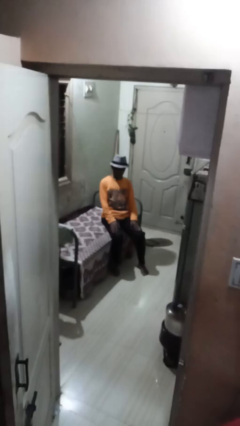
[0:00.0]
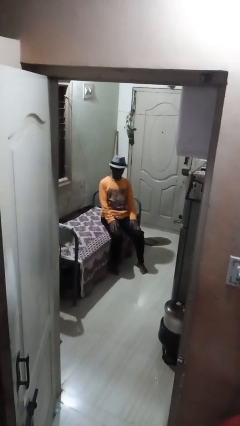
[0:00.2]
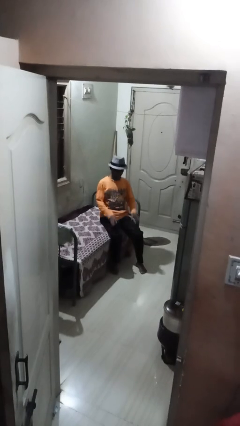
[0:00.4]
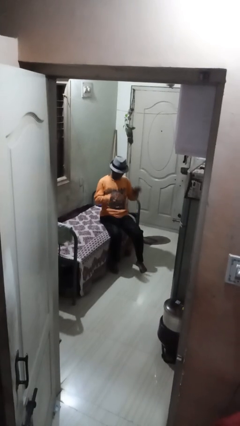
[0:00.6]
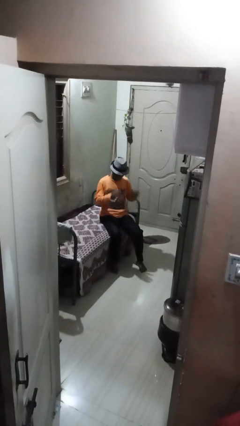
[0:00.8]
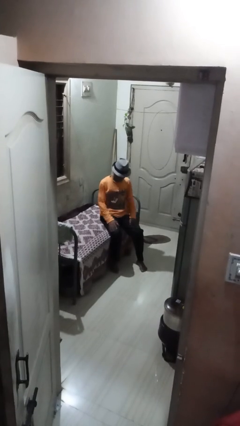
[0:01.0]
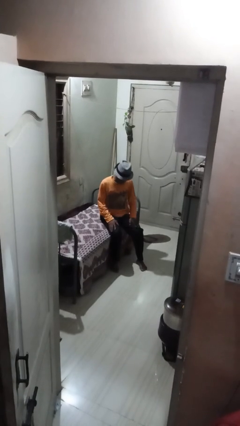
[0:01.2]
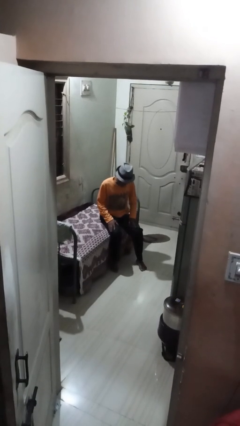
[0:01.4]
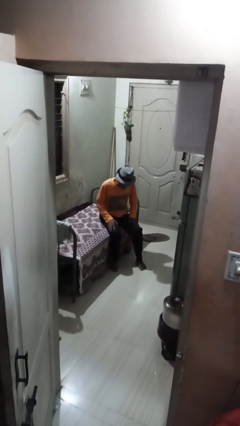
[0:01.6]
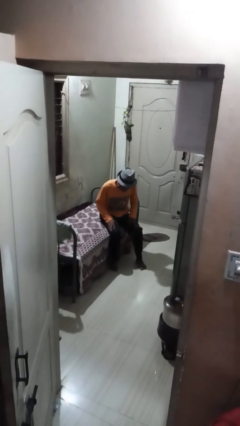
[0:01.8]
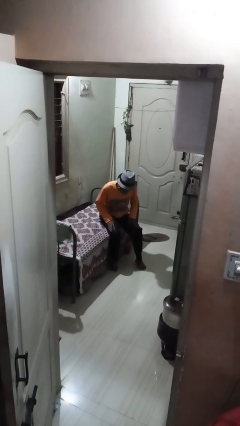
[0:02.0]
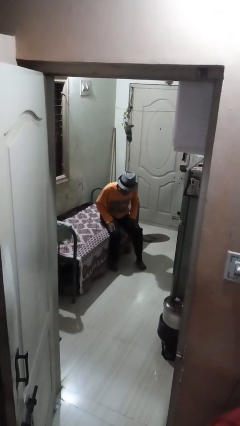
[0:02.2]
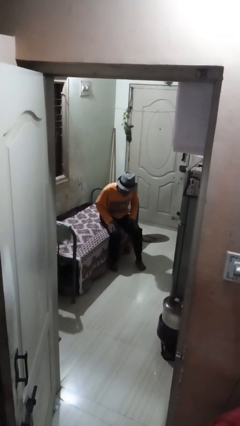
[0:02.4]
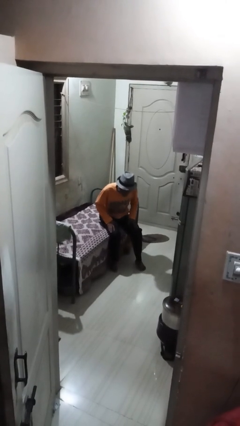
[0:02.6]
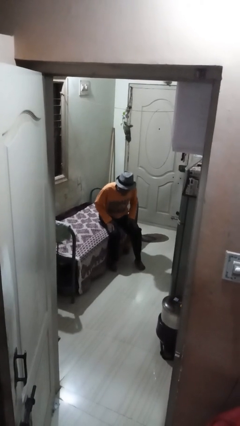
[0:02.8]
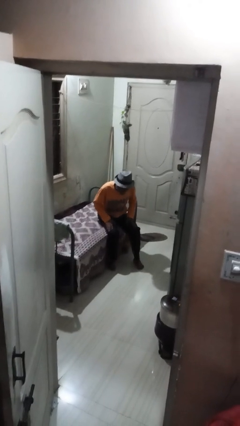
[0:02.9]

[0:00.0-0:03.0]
person slaps hands on thighs

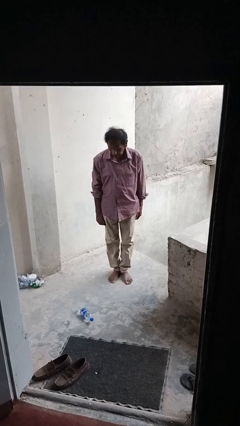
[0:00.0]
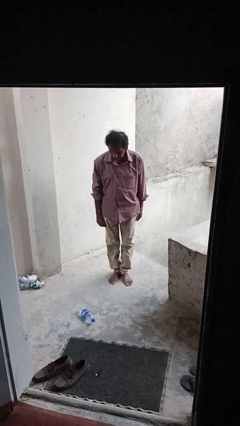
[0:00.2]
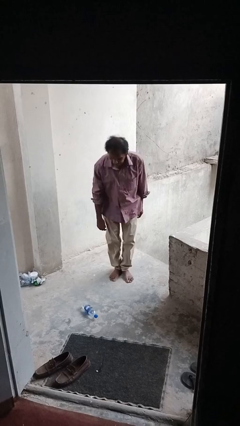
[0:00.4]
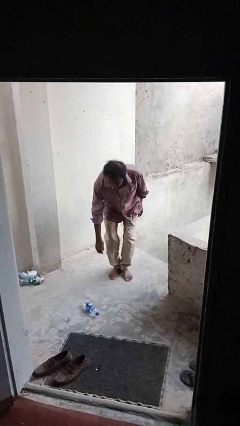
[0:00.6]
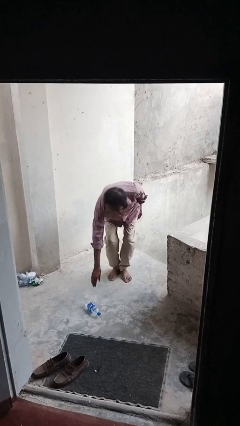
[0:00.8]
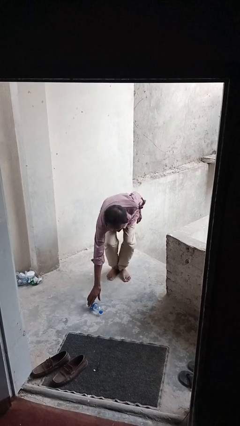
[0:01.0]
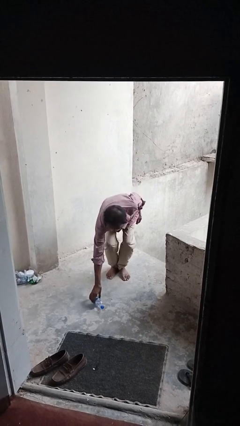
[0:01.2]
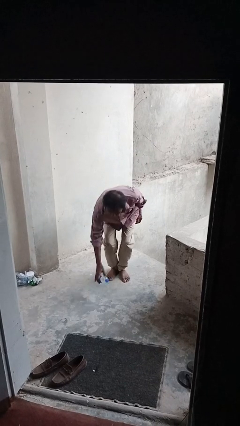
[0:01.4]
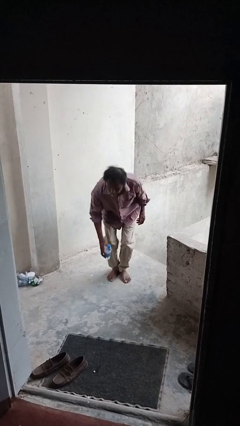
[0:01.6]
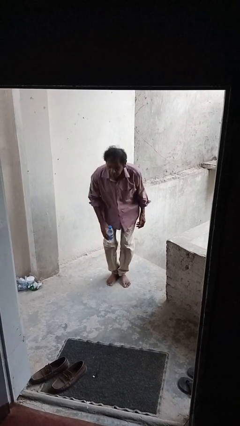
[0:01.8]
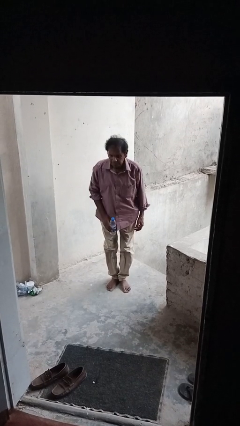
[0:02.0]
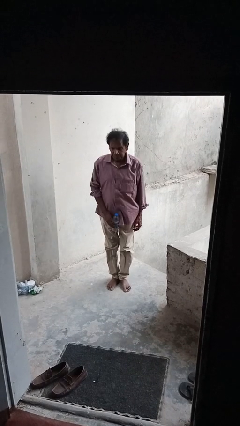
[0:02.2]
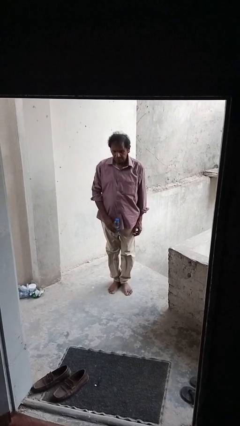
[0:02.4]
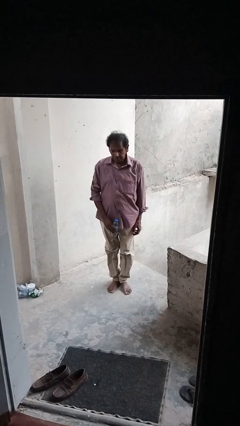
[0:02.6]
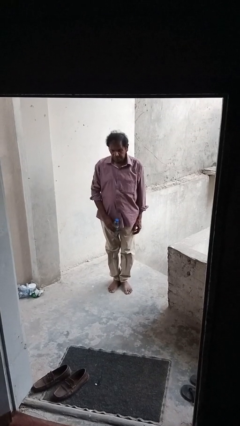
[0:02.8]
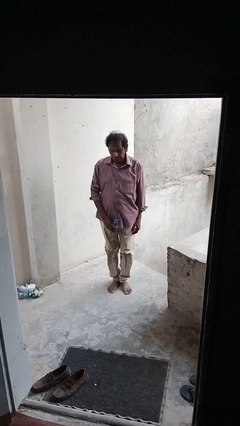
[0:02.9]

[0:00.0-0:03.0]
person picks up object from floor

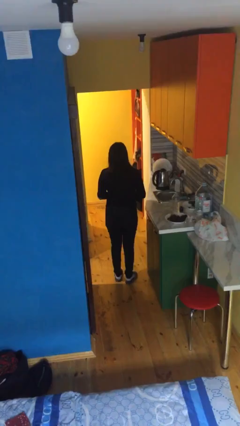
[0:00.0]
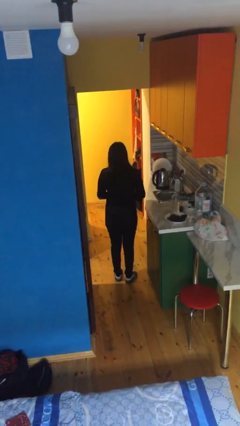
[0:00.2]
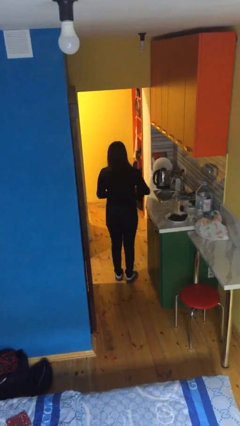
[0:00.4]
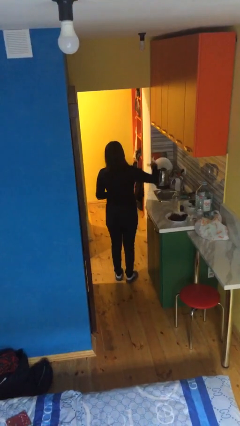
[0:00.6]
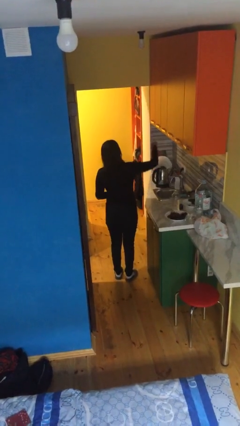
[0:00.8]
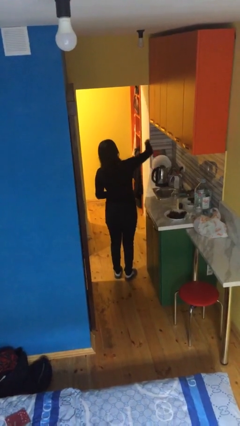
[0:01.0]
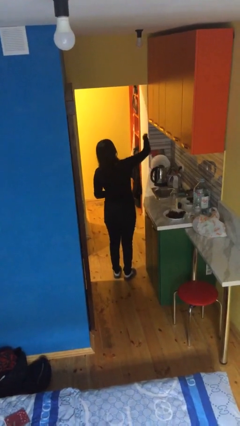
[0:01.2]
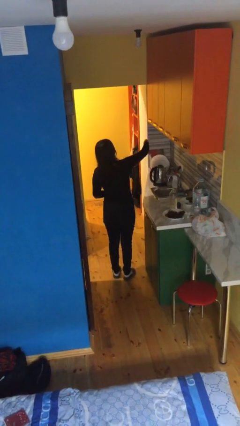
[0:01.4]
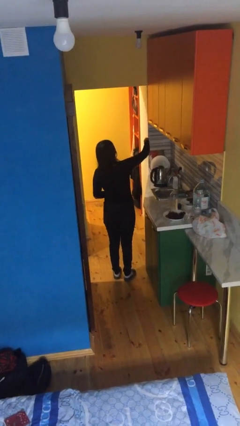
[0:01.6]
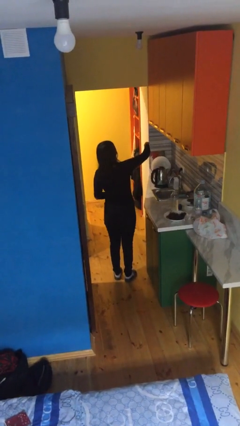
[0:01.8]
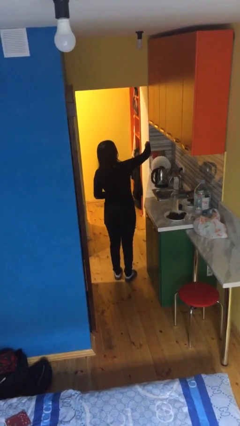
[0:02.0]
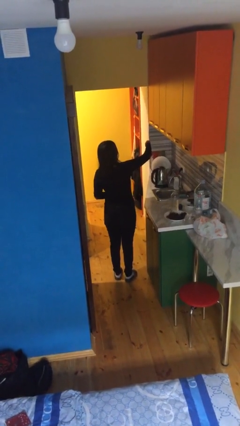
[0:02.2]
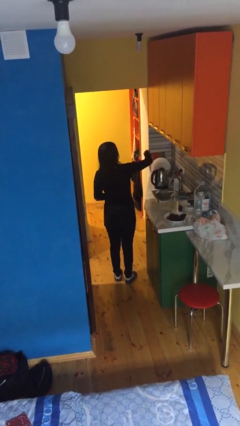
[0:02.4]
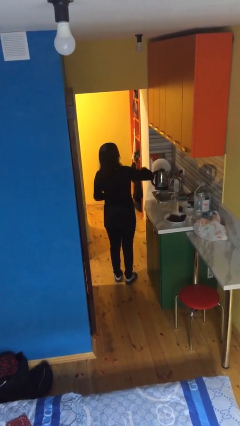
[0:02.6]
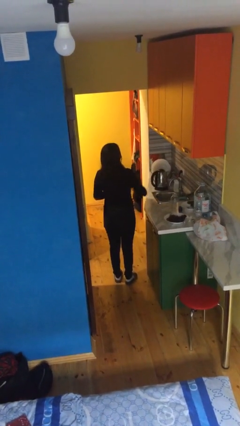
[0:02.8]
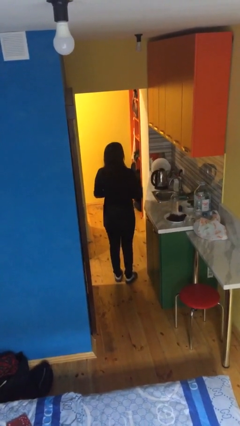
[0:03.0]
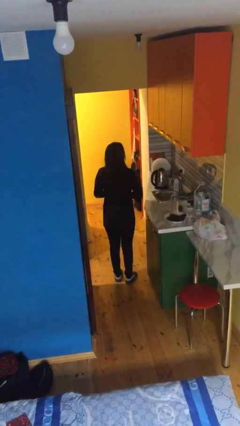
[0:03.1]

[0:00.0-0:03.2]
person gestures thumbs down

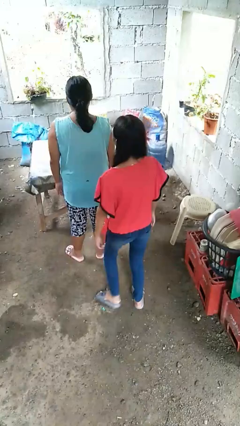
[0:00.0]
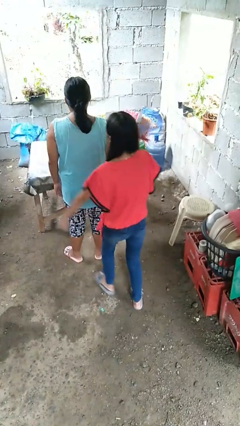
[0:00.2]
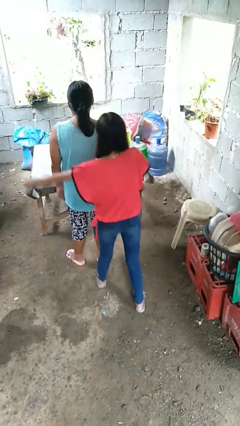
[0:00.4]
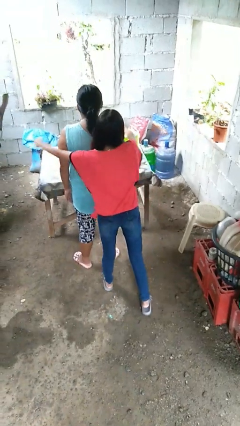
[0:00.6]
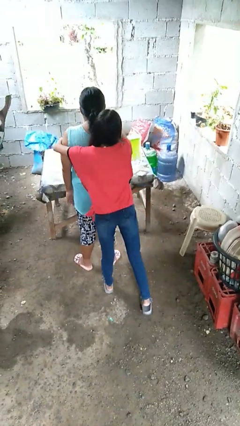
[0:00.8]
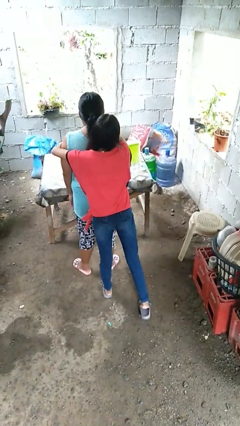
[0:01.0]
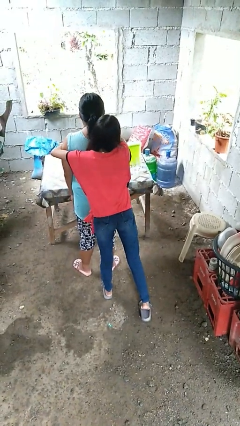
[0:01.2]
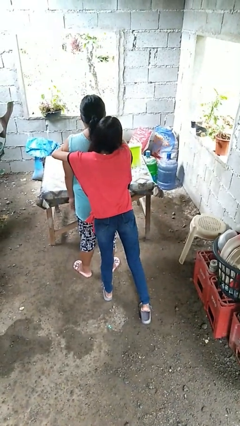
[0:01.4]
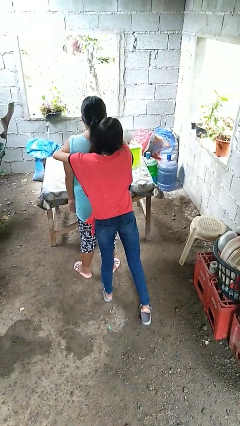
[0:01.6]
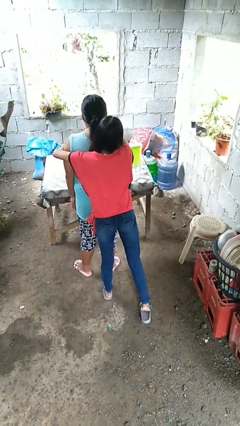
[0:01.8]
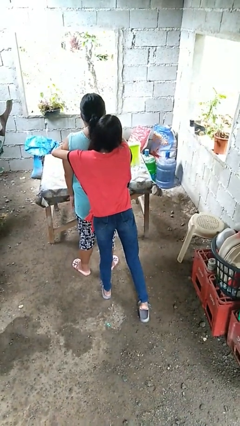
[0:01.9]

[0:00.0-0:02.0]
person hugs person from behind

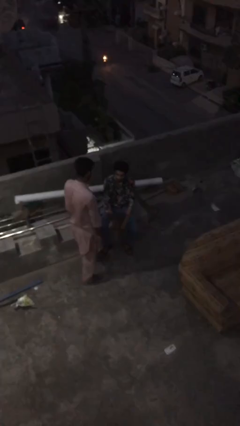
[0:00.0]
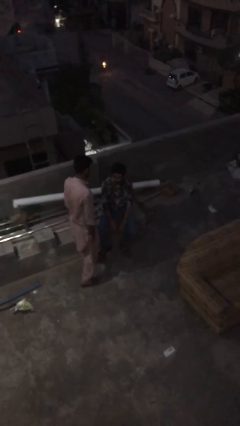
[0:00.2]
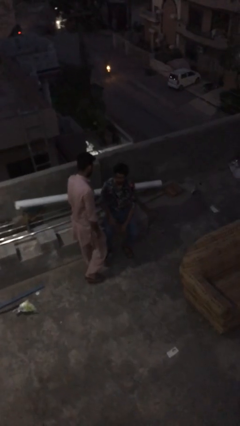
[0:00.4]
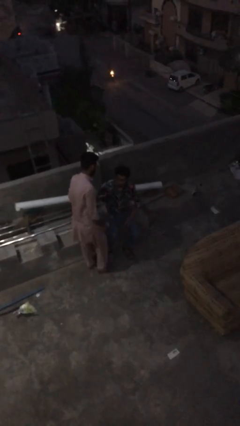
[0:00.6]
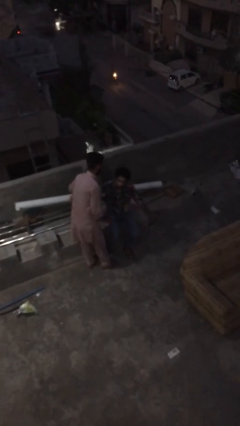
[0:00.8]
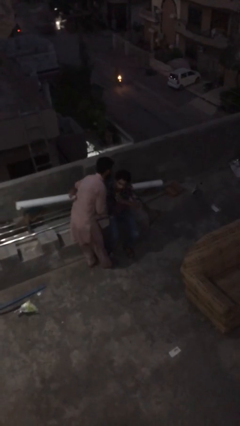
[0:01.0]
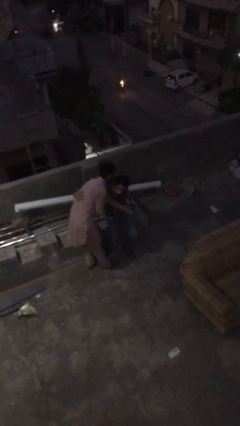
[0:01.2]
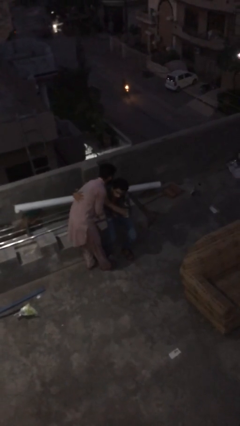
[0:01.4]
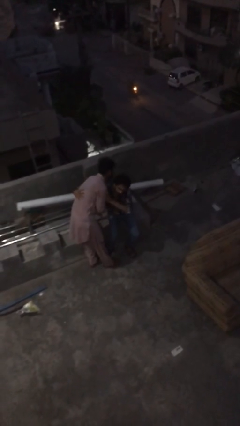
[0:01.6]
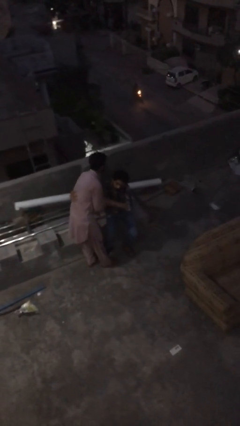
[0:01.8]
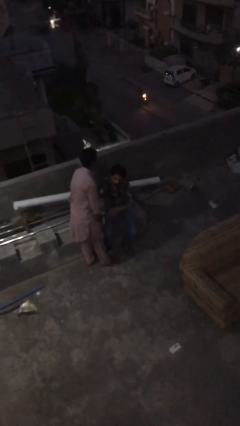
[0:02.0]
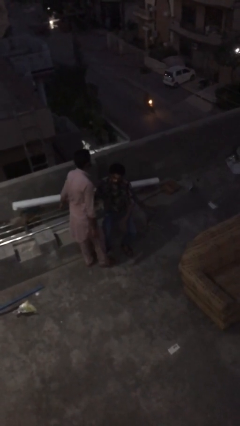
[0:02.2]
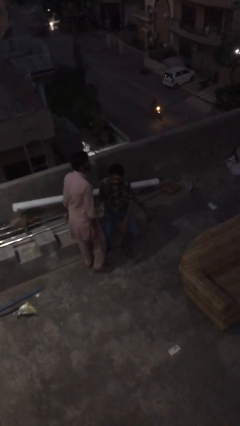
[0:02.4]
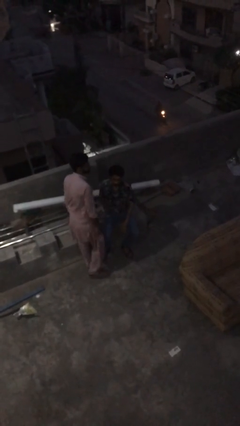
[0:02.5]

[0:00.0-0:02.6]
person embraces person

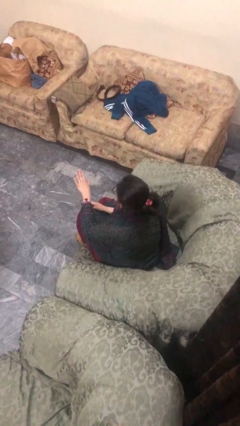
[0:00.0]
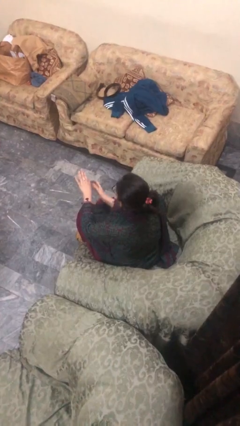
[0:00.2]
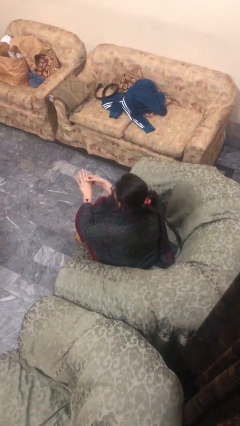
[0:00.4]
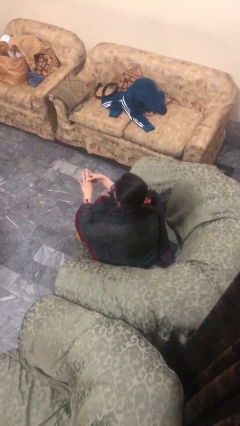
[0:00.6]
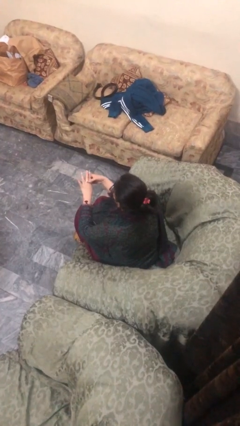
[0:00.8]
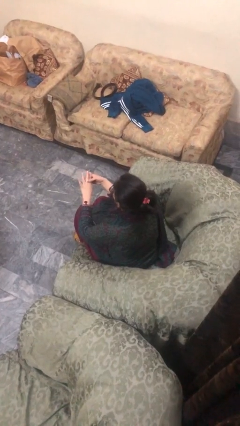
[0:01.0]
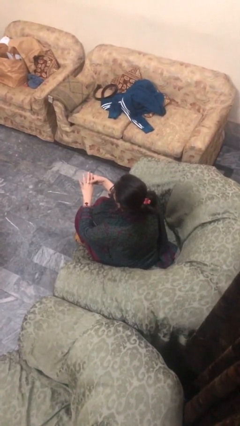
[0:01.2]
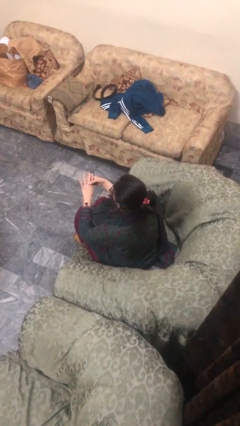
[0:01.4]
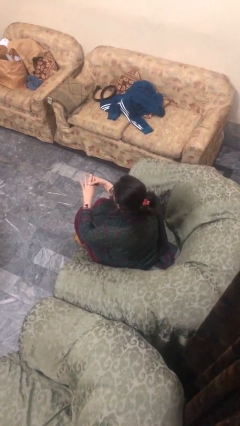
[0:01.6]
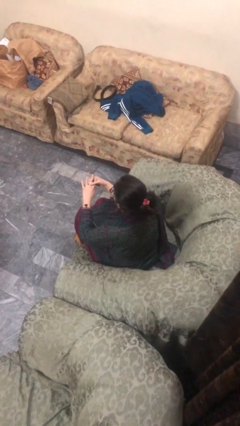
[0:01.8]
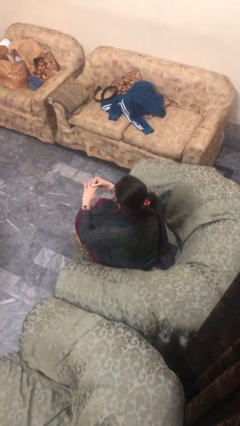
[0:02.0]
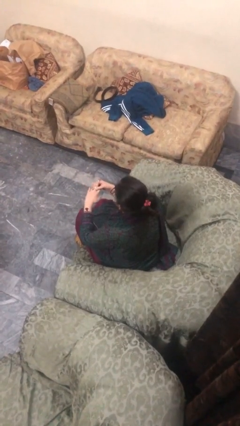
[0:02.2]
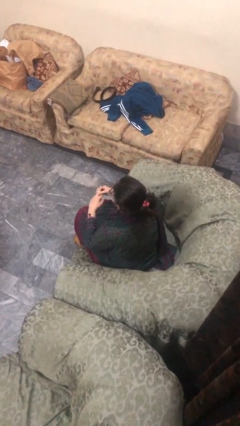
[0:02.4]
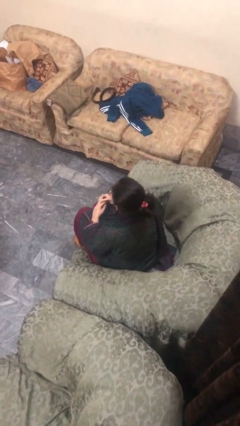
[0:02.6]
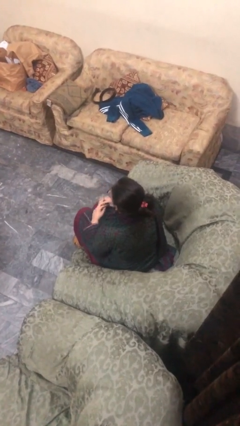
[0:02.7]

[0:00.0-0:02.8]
person takes off ring

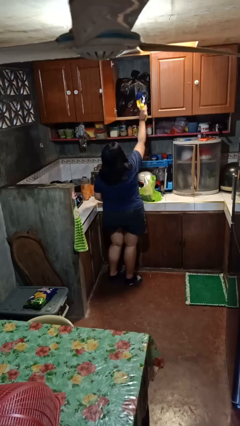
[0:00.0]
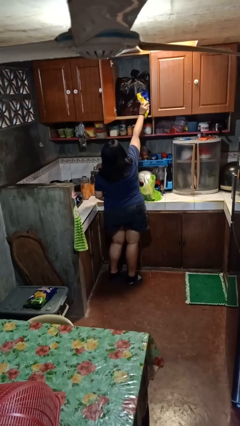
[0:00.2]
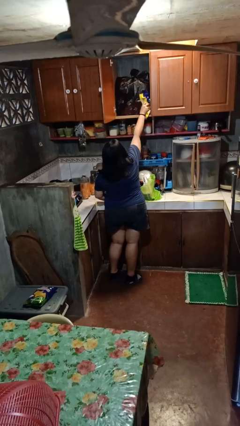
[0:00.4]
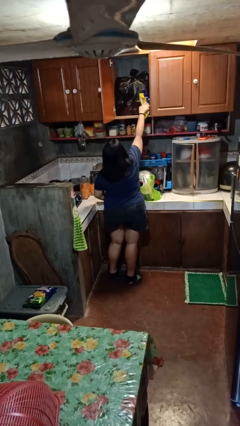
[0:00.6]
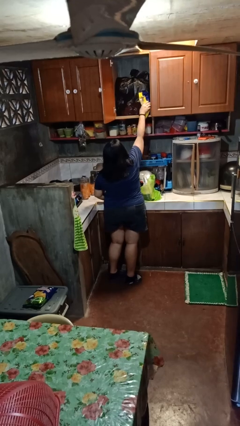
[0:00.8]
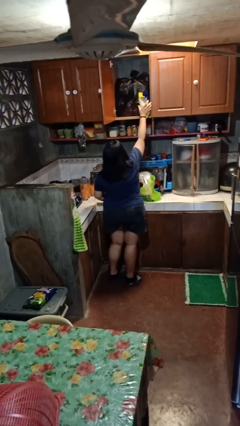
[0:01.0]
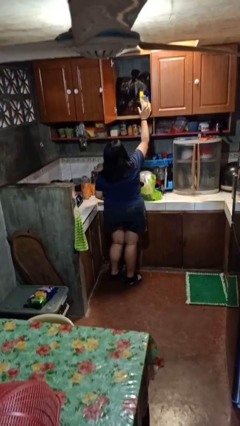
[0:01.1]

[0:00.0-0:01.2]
person loads groceries into cabinet
